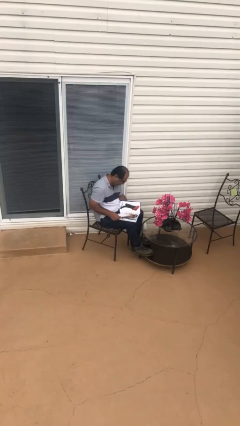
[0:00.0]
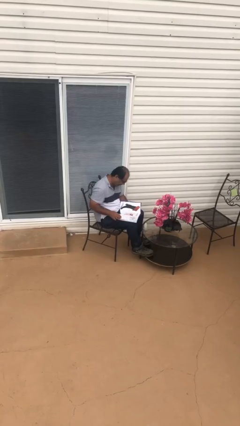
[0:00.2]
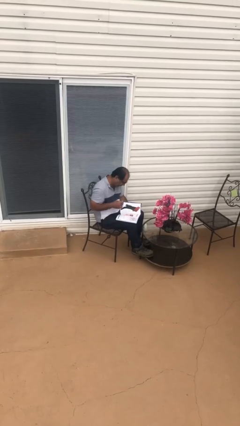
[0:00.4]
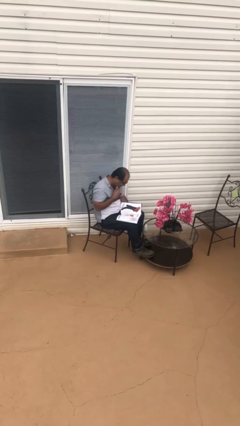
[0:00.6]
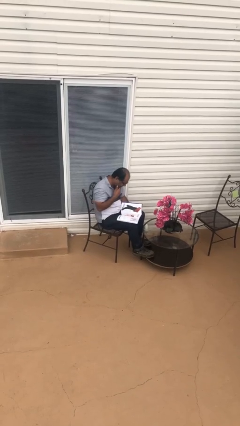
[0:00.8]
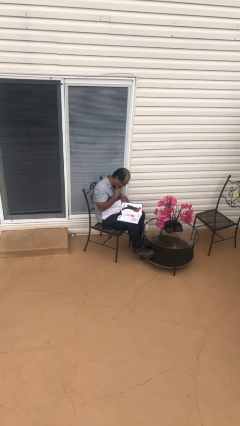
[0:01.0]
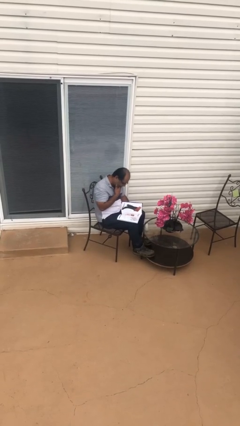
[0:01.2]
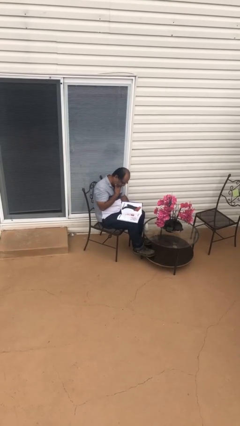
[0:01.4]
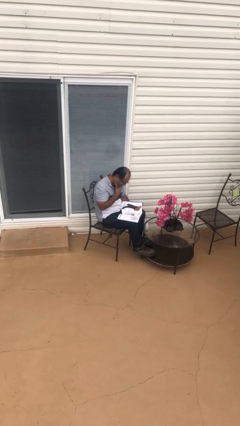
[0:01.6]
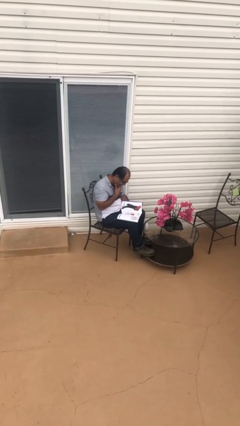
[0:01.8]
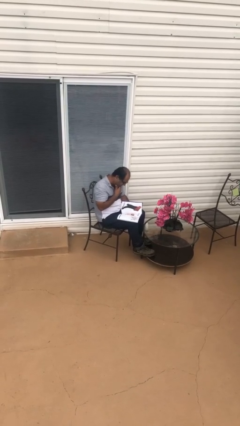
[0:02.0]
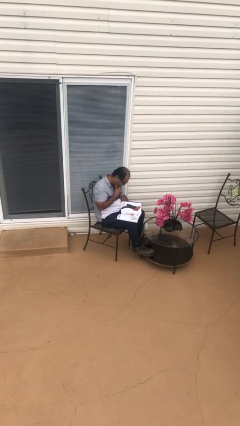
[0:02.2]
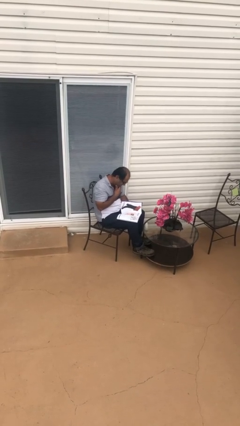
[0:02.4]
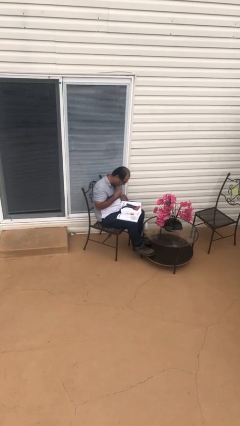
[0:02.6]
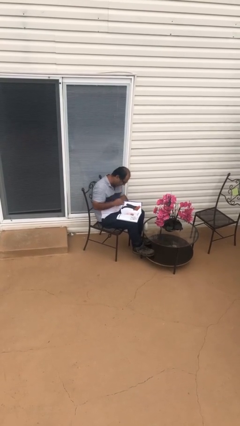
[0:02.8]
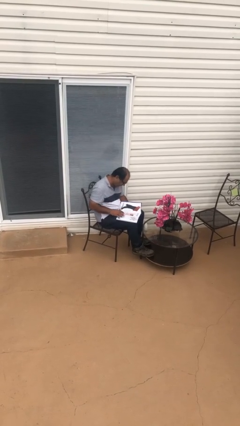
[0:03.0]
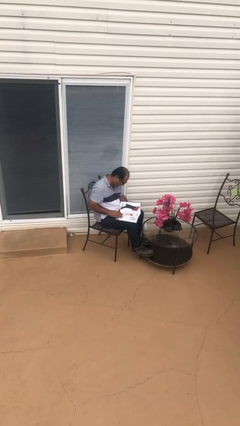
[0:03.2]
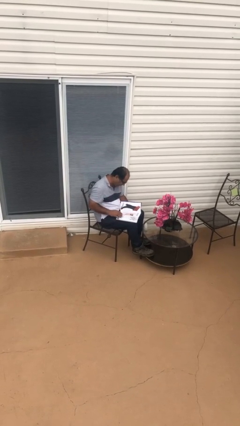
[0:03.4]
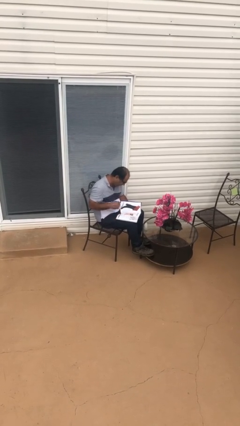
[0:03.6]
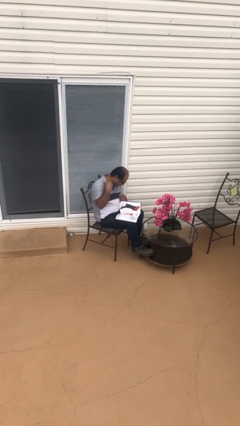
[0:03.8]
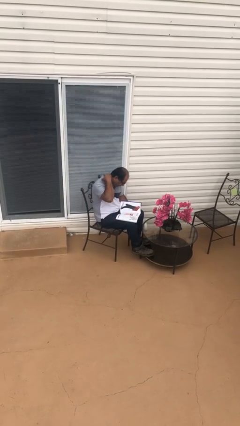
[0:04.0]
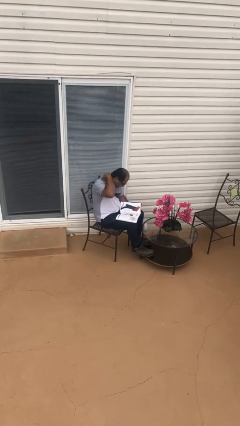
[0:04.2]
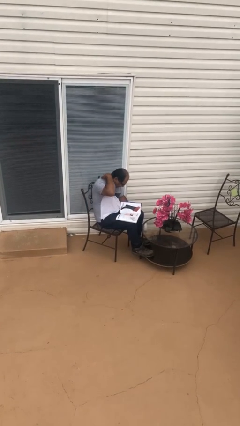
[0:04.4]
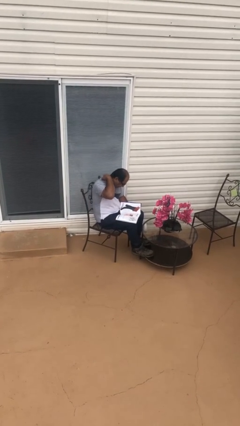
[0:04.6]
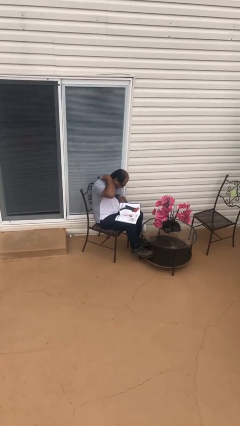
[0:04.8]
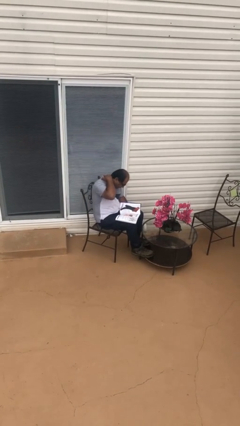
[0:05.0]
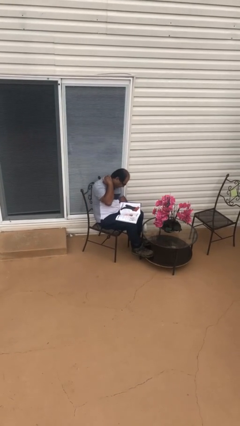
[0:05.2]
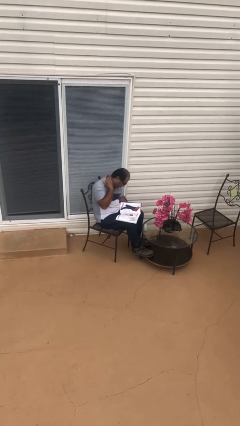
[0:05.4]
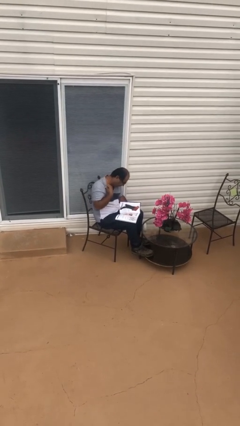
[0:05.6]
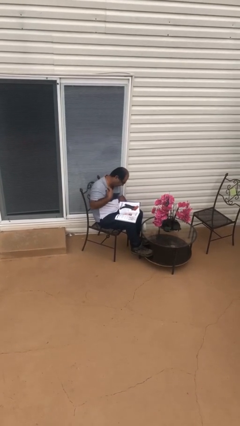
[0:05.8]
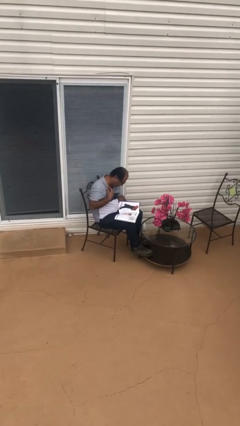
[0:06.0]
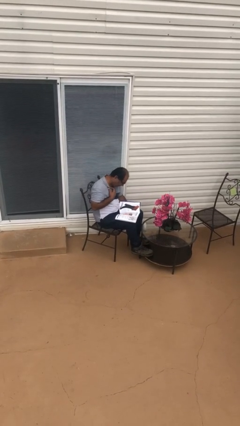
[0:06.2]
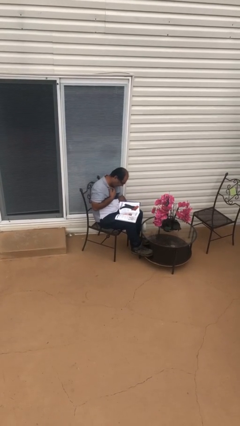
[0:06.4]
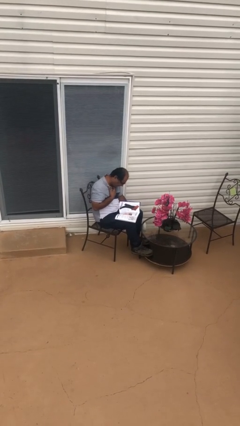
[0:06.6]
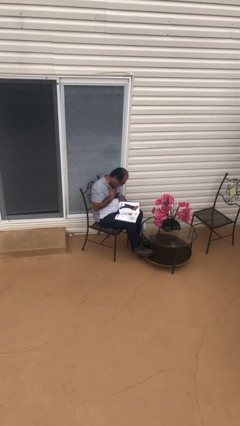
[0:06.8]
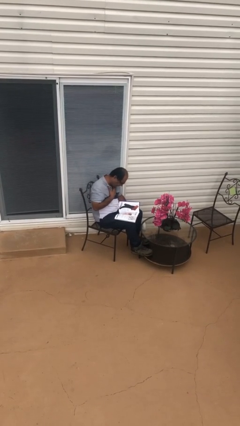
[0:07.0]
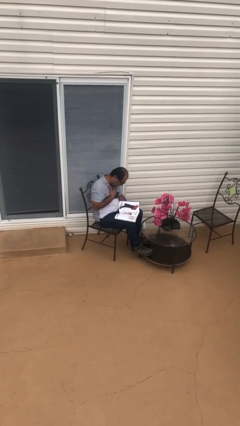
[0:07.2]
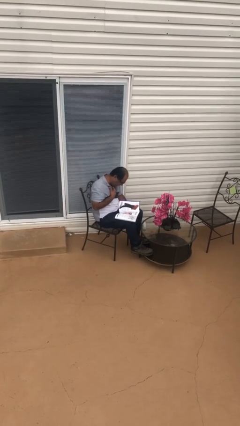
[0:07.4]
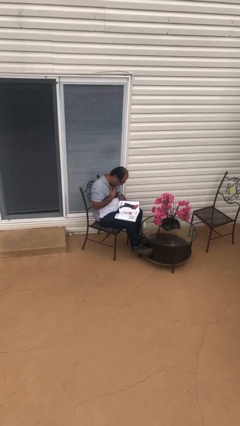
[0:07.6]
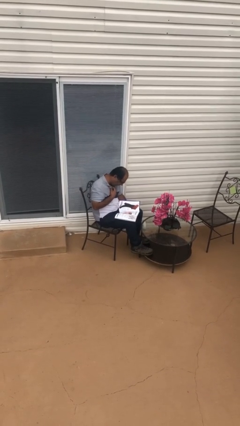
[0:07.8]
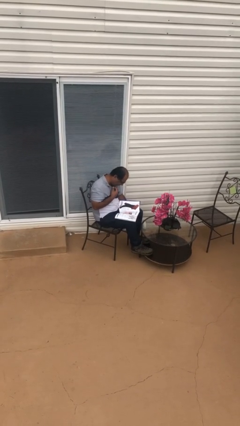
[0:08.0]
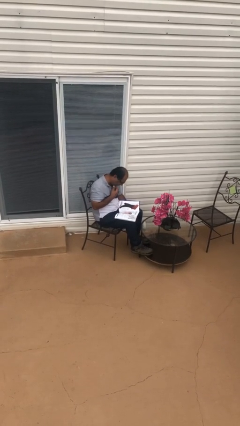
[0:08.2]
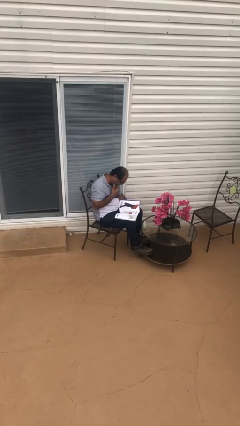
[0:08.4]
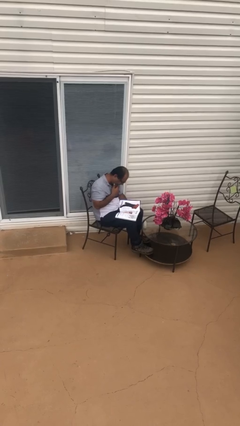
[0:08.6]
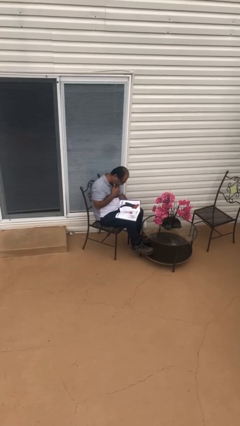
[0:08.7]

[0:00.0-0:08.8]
person reads document

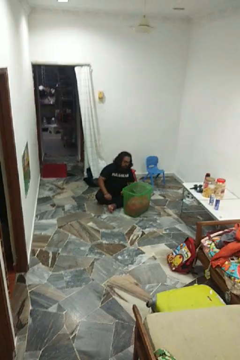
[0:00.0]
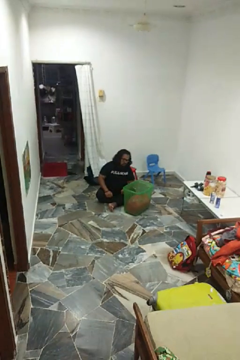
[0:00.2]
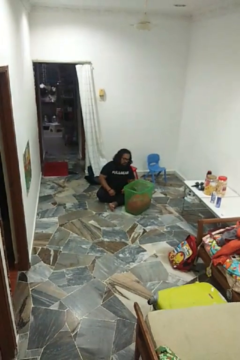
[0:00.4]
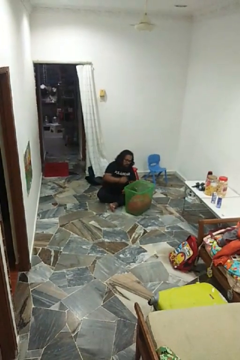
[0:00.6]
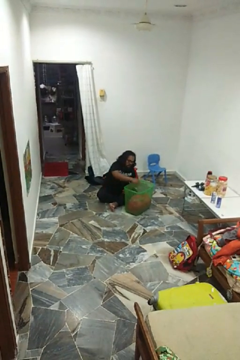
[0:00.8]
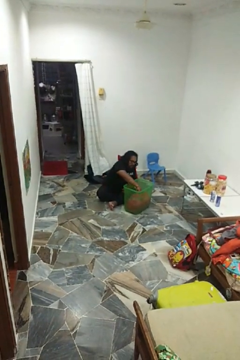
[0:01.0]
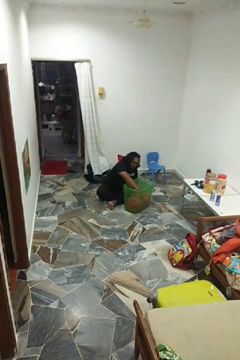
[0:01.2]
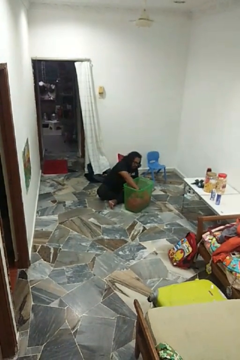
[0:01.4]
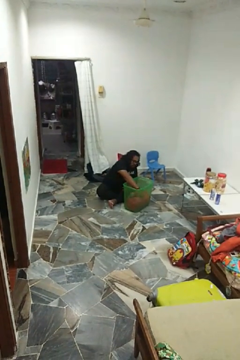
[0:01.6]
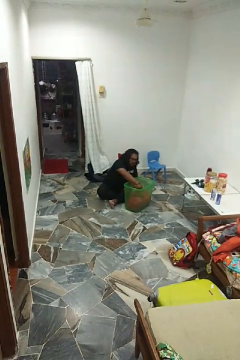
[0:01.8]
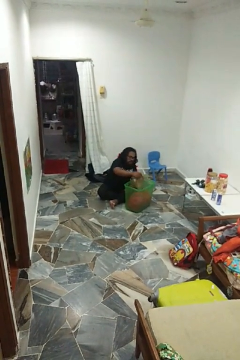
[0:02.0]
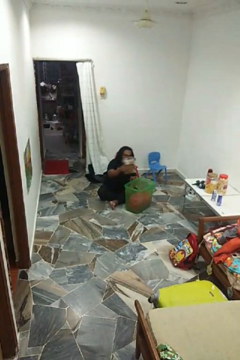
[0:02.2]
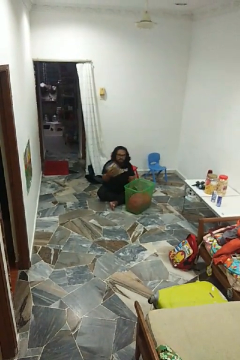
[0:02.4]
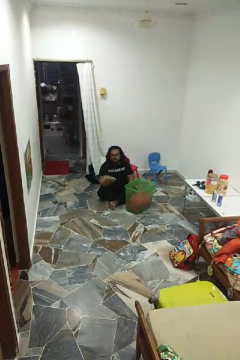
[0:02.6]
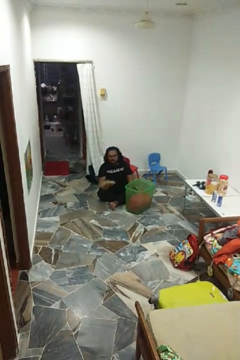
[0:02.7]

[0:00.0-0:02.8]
person takes object from basket

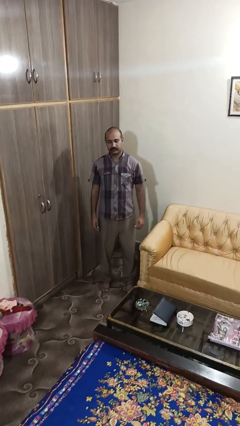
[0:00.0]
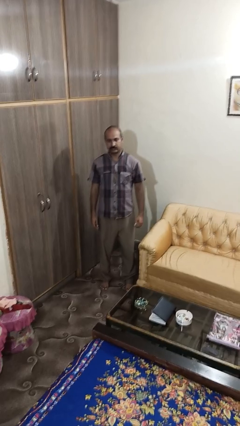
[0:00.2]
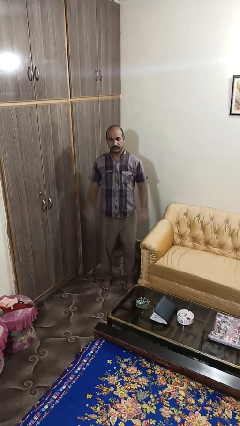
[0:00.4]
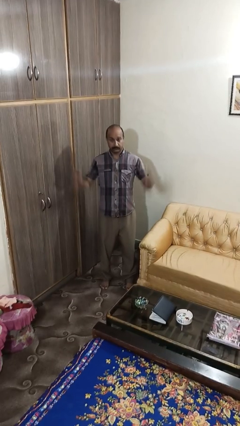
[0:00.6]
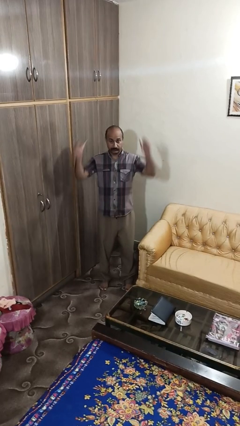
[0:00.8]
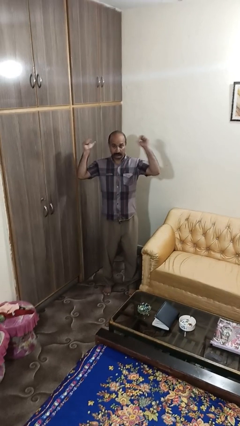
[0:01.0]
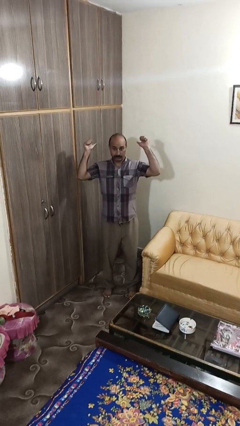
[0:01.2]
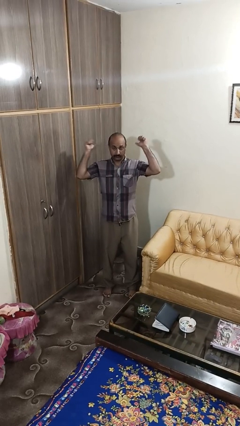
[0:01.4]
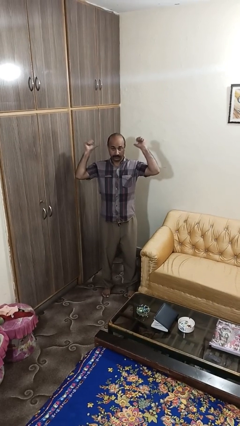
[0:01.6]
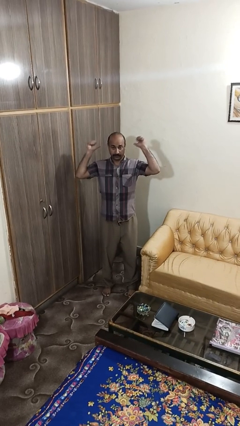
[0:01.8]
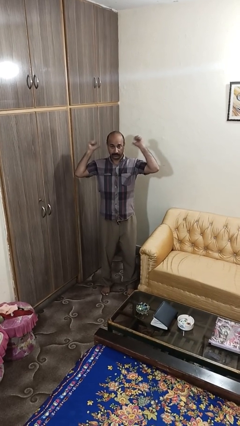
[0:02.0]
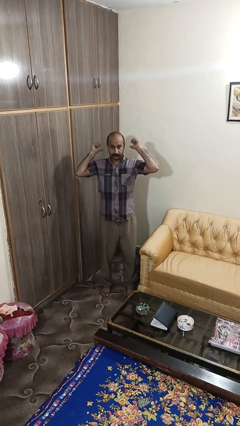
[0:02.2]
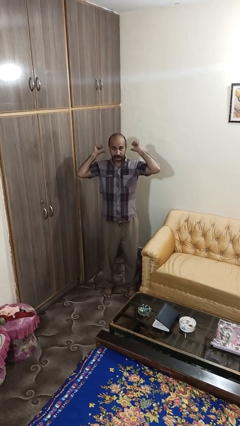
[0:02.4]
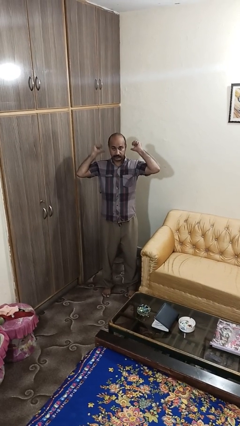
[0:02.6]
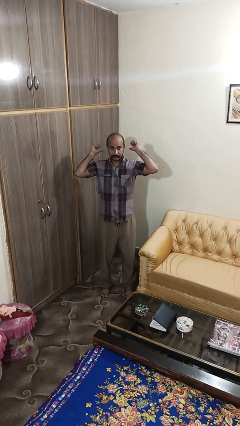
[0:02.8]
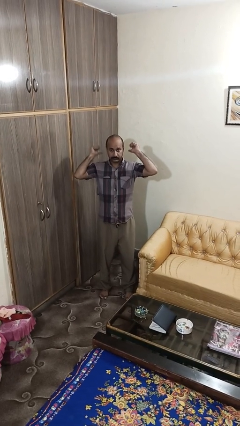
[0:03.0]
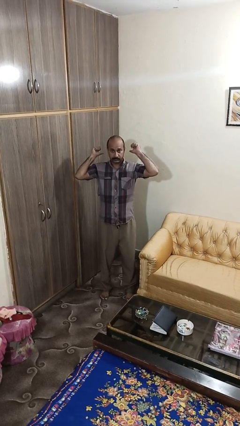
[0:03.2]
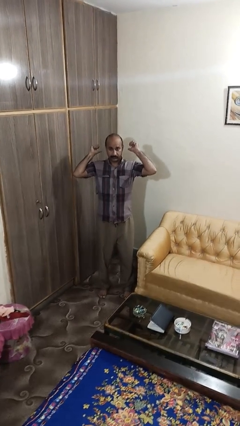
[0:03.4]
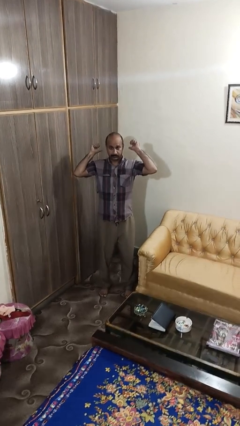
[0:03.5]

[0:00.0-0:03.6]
person gestures behind me

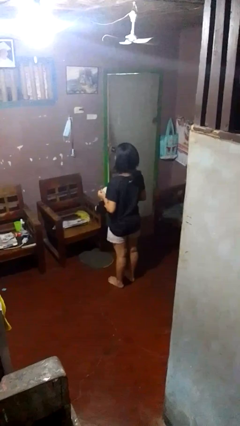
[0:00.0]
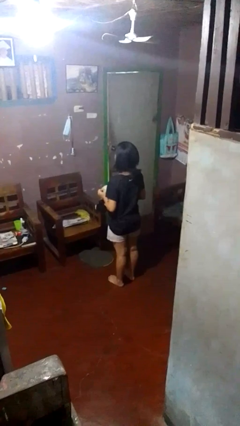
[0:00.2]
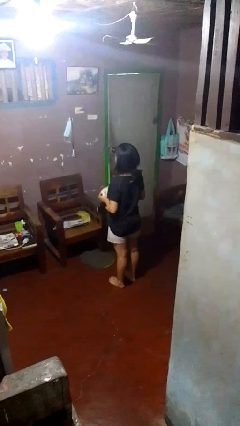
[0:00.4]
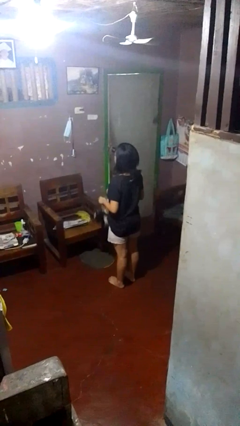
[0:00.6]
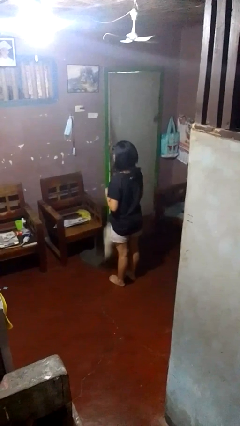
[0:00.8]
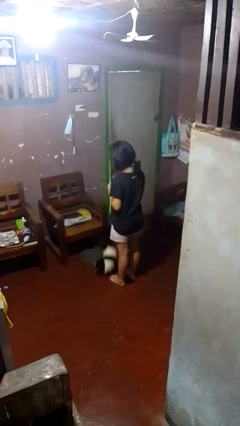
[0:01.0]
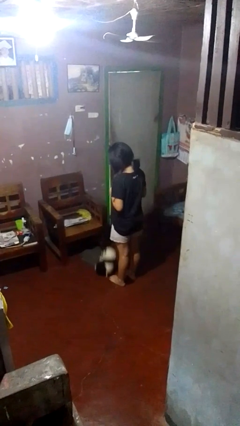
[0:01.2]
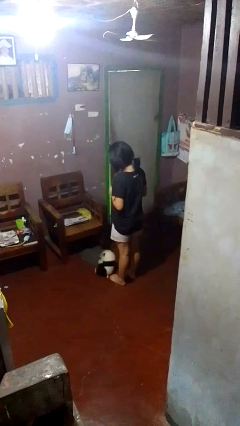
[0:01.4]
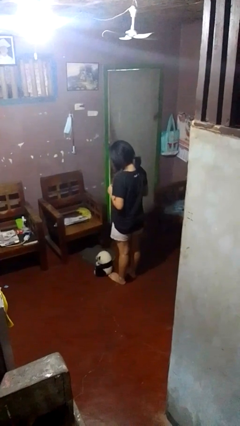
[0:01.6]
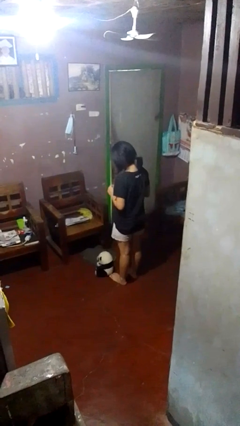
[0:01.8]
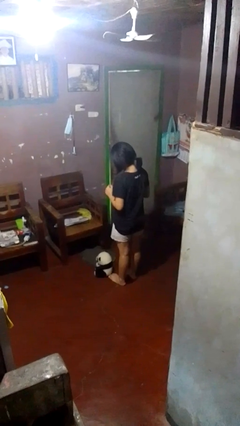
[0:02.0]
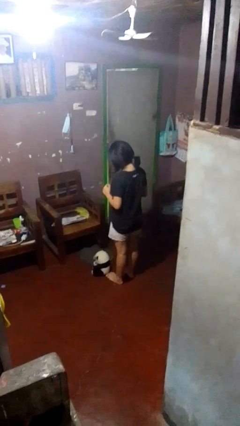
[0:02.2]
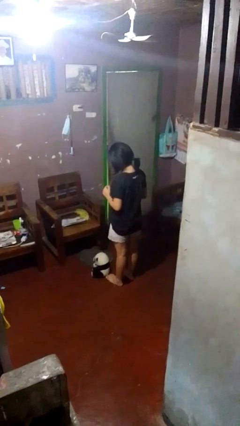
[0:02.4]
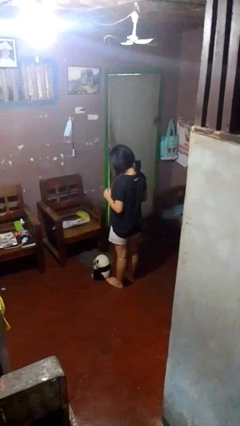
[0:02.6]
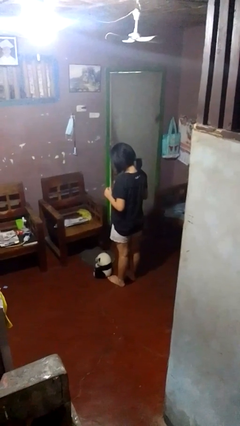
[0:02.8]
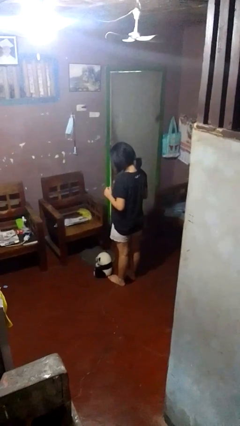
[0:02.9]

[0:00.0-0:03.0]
person drops object

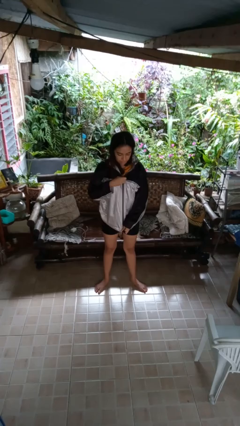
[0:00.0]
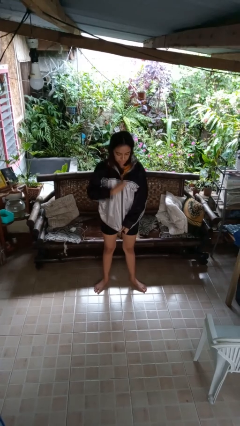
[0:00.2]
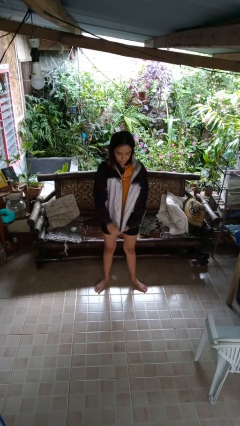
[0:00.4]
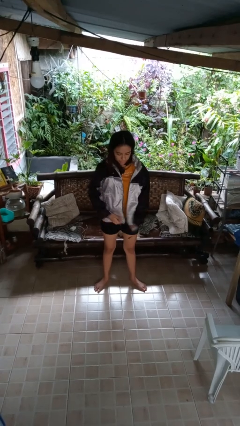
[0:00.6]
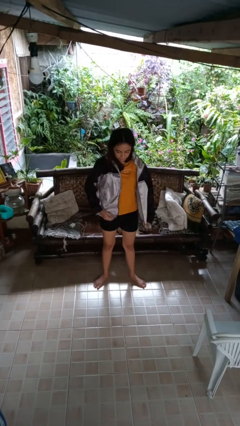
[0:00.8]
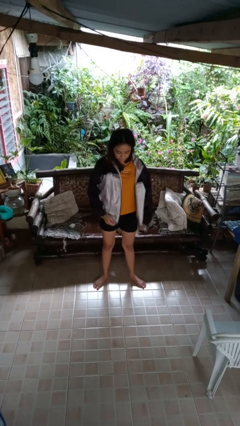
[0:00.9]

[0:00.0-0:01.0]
person unzips jacket
